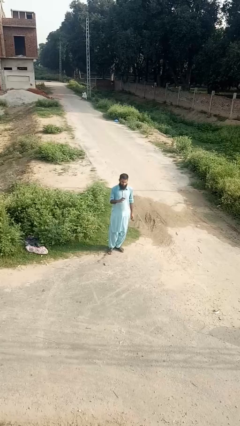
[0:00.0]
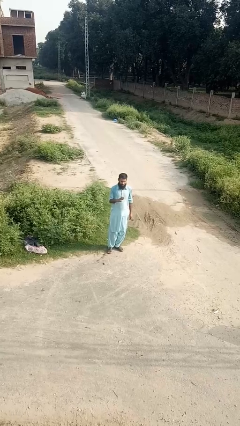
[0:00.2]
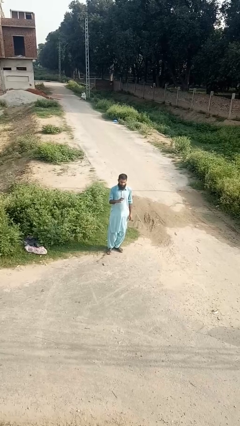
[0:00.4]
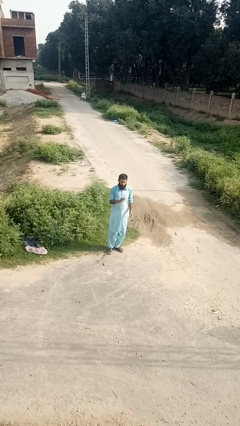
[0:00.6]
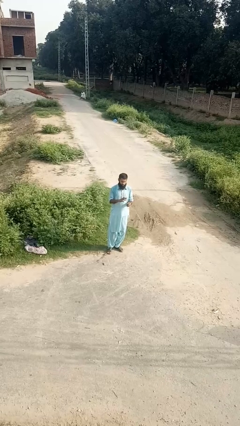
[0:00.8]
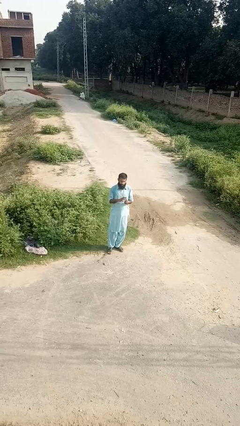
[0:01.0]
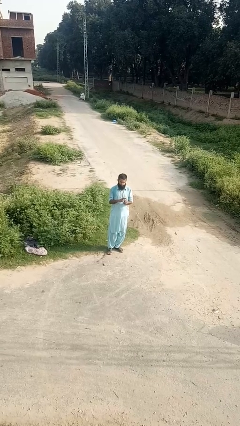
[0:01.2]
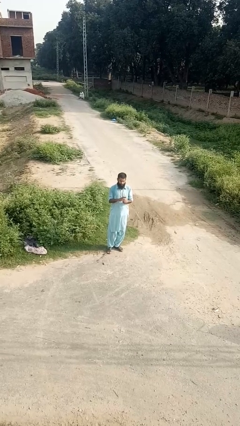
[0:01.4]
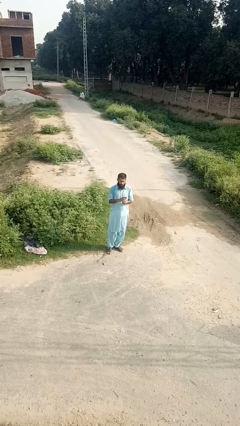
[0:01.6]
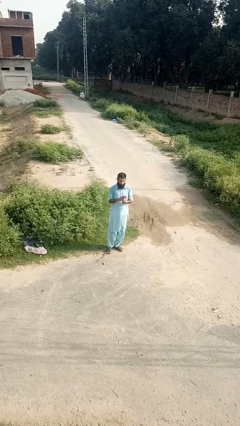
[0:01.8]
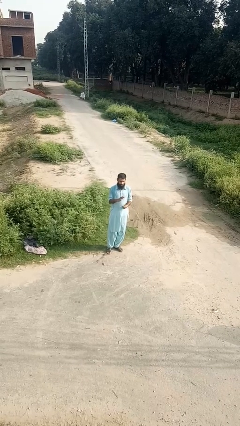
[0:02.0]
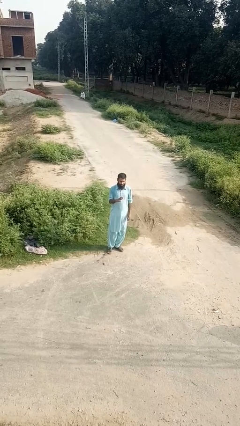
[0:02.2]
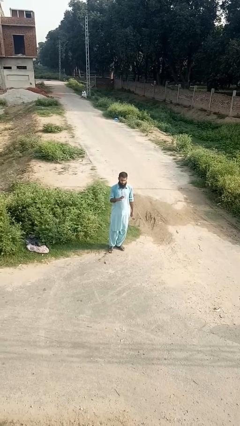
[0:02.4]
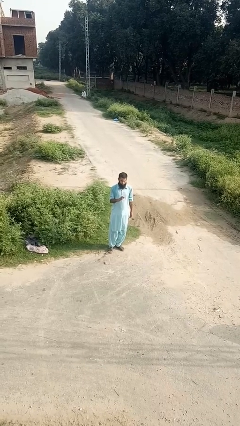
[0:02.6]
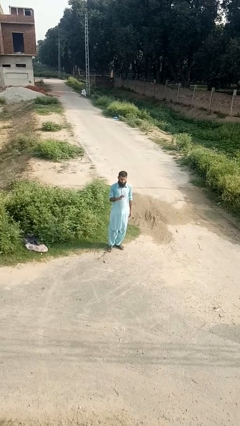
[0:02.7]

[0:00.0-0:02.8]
person puts on ring

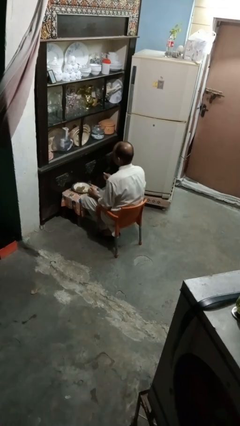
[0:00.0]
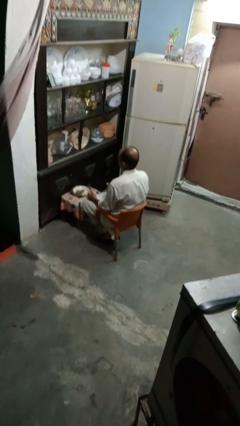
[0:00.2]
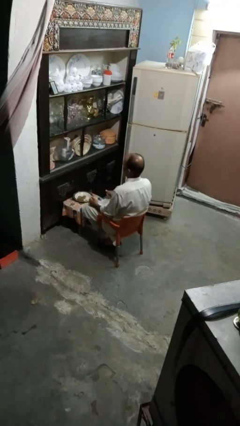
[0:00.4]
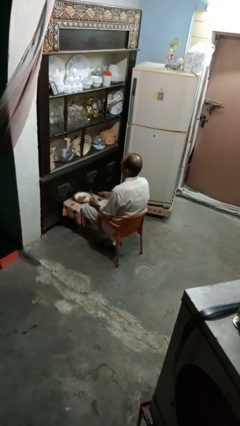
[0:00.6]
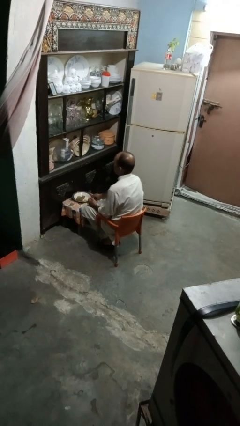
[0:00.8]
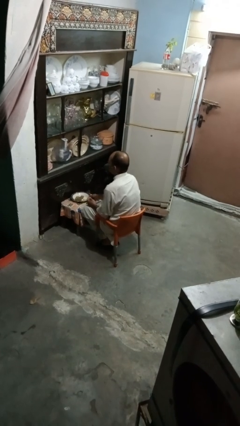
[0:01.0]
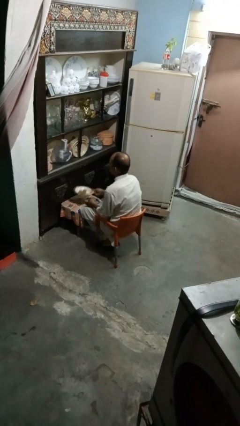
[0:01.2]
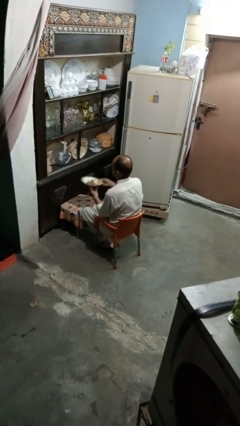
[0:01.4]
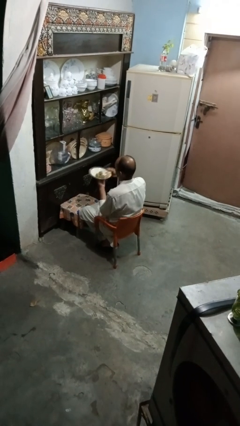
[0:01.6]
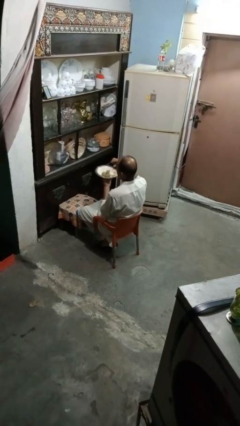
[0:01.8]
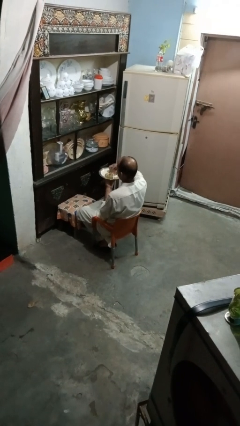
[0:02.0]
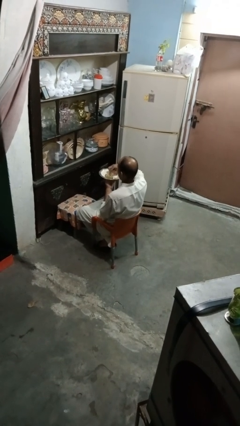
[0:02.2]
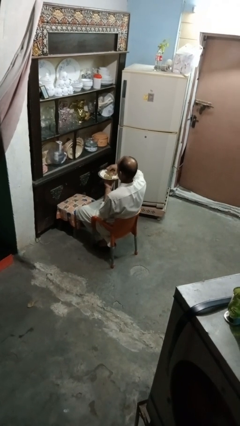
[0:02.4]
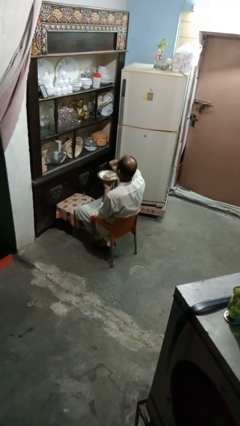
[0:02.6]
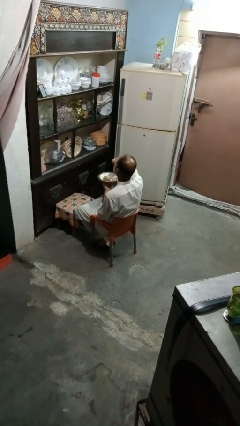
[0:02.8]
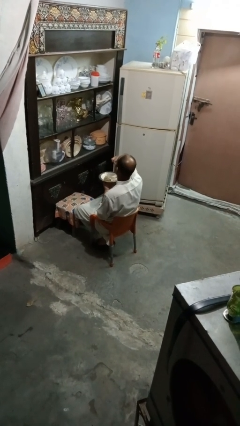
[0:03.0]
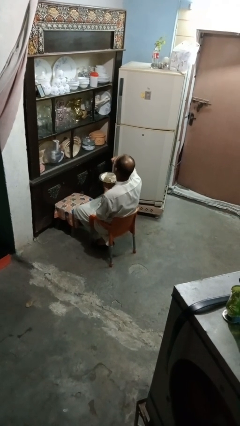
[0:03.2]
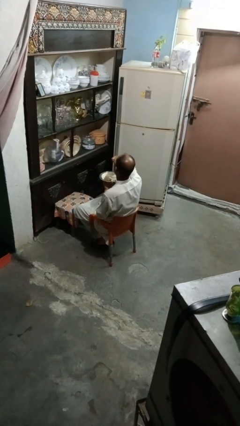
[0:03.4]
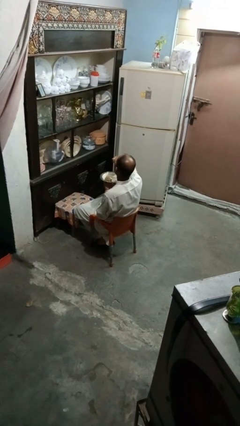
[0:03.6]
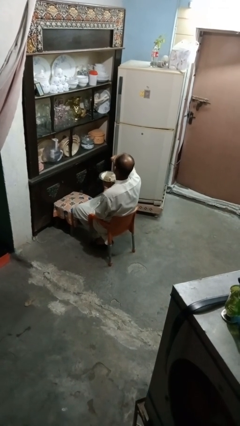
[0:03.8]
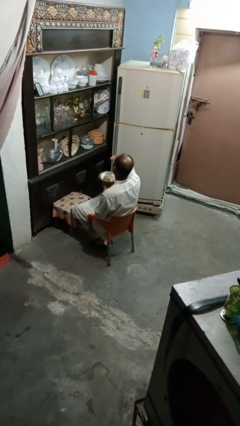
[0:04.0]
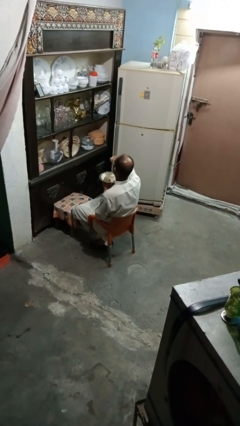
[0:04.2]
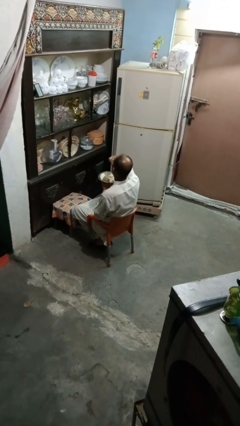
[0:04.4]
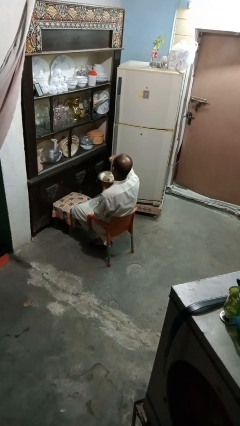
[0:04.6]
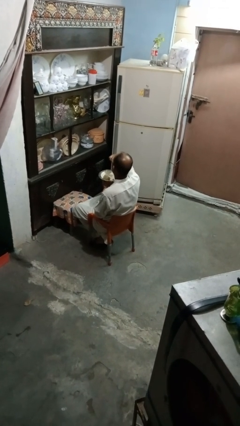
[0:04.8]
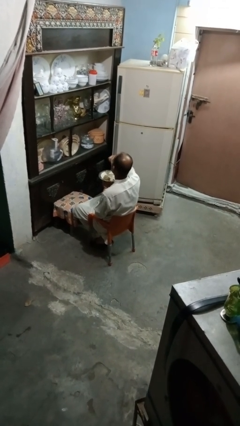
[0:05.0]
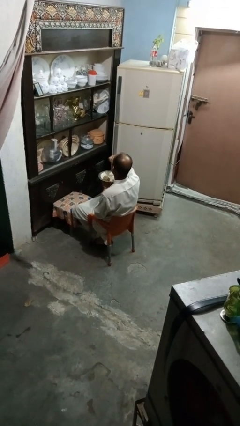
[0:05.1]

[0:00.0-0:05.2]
person eats with hands

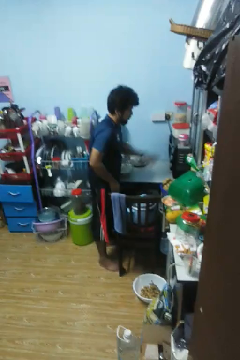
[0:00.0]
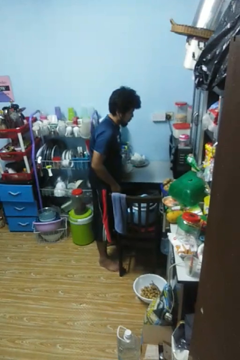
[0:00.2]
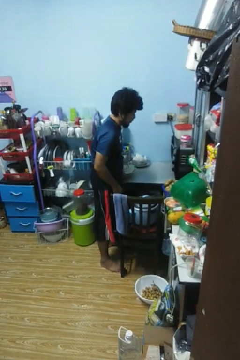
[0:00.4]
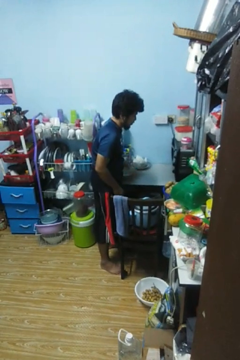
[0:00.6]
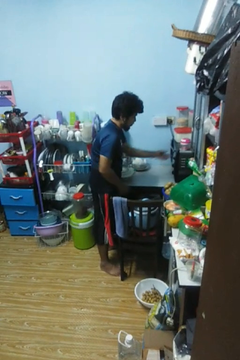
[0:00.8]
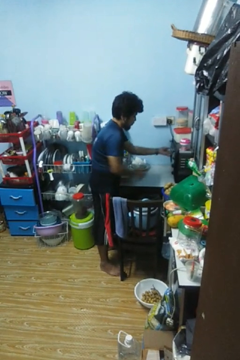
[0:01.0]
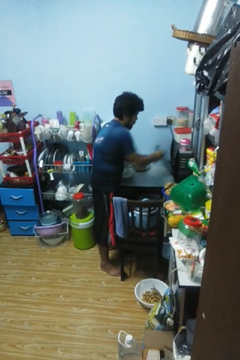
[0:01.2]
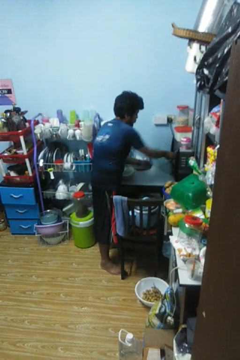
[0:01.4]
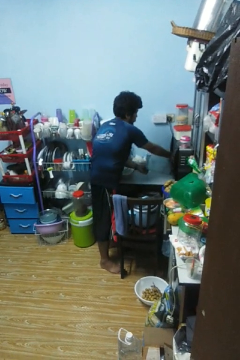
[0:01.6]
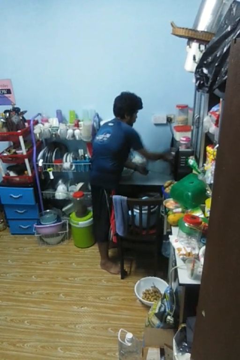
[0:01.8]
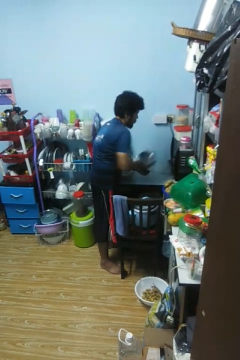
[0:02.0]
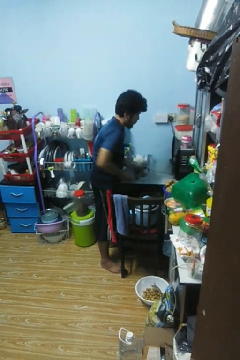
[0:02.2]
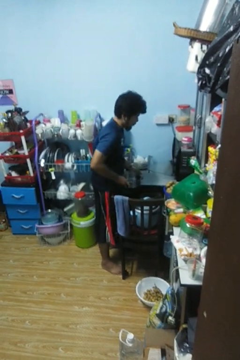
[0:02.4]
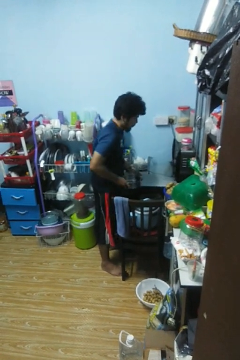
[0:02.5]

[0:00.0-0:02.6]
person takes object from oven

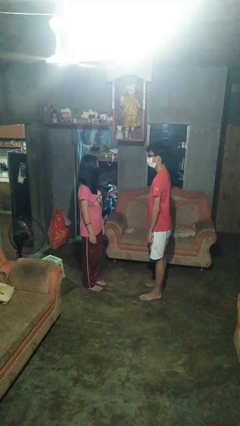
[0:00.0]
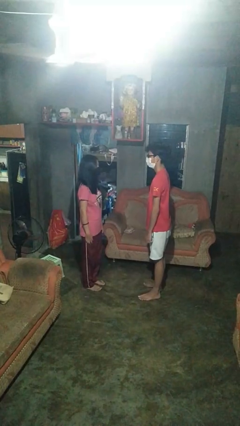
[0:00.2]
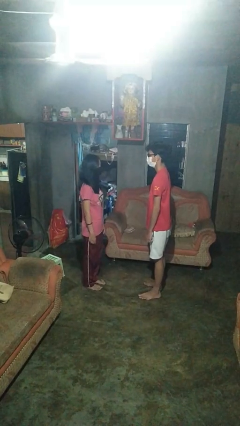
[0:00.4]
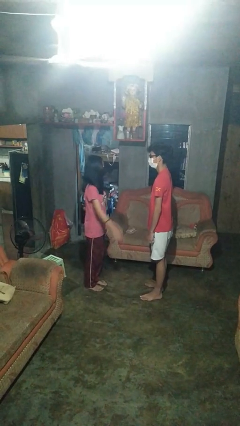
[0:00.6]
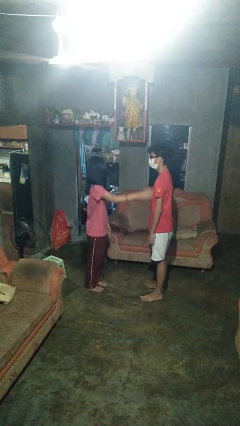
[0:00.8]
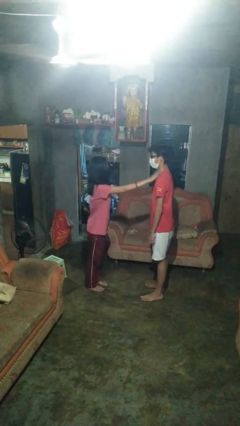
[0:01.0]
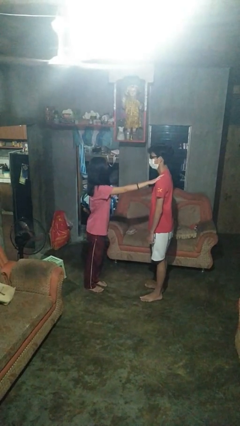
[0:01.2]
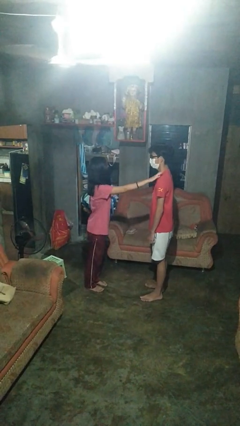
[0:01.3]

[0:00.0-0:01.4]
person pounds shoulders of person

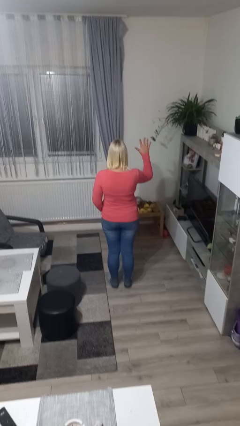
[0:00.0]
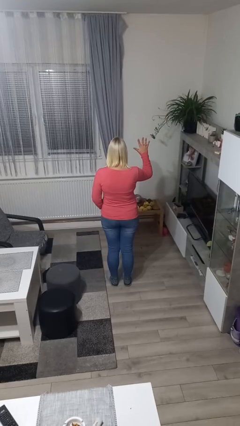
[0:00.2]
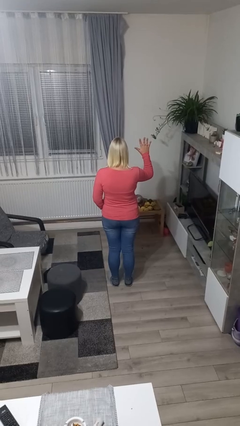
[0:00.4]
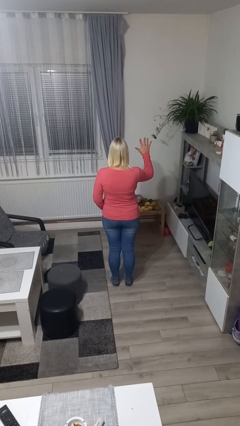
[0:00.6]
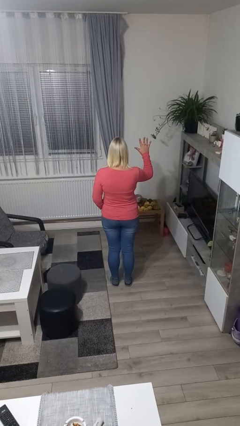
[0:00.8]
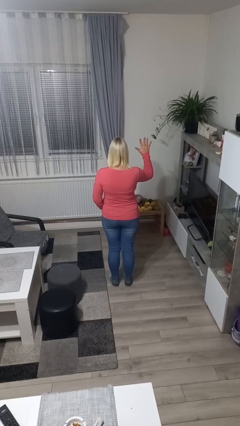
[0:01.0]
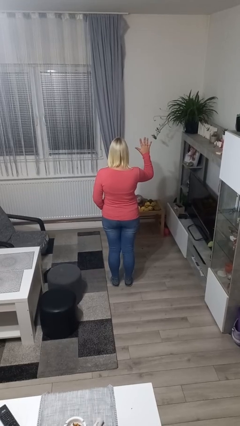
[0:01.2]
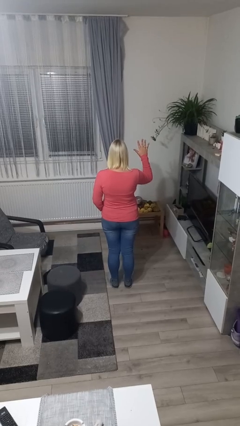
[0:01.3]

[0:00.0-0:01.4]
person gestures number five

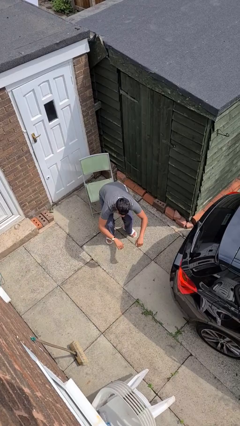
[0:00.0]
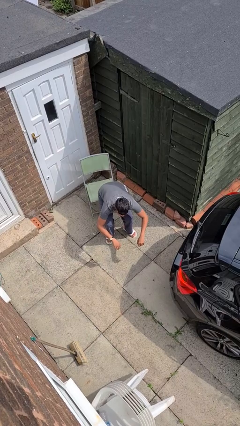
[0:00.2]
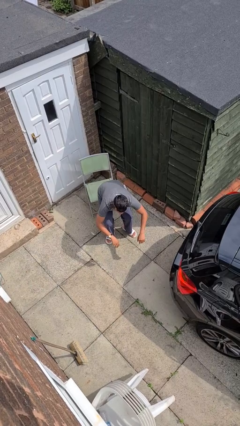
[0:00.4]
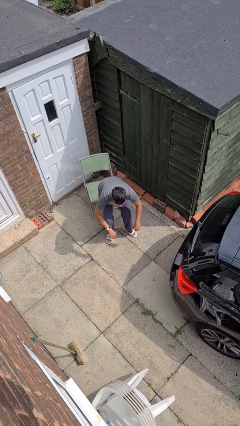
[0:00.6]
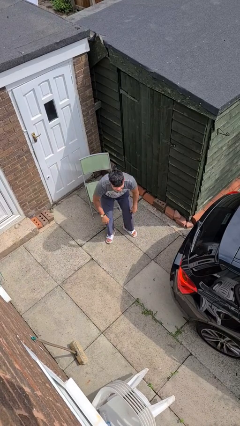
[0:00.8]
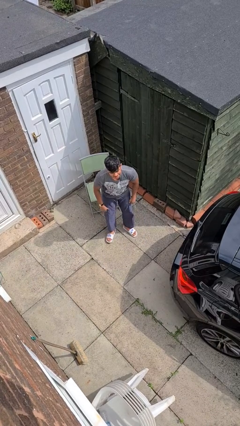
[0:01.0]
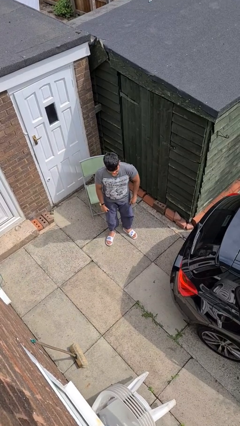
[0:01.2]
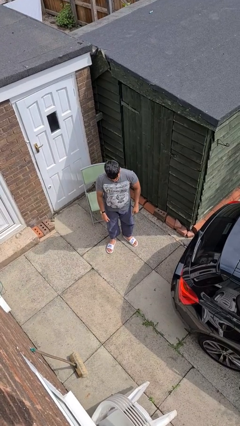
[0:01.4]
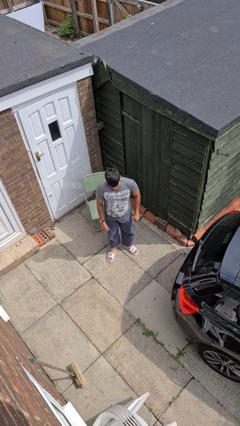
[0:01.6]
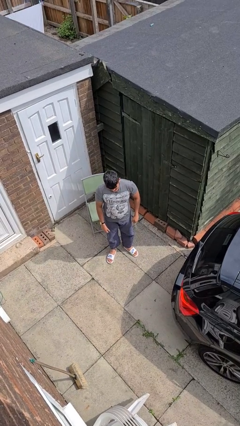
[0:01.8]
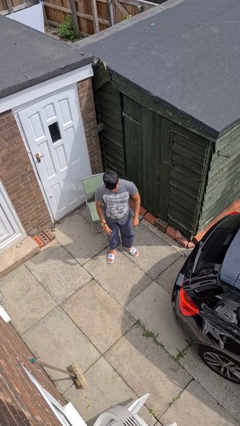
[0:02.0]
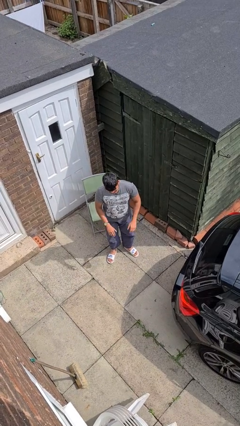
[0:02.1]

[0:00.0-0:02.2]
person stands up

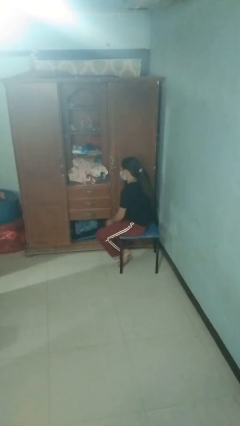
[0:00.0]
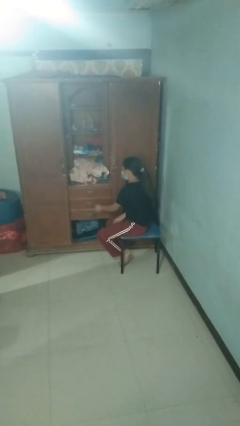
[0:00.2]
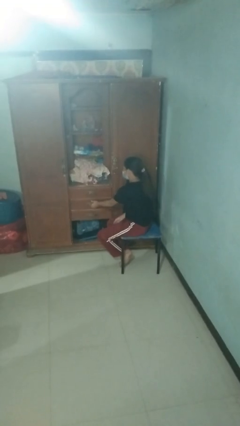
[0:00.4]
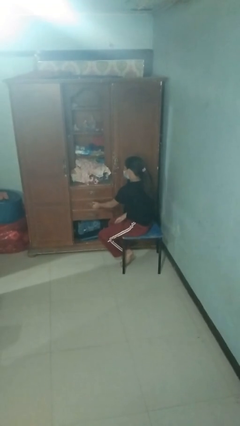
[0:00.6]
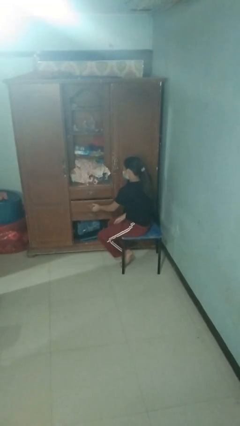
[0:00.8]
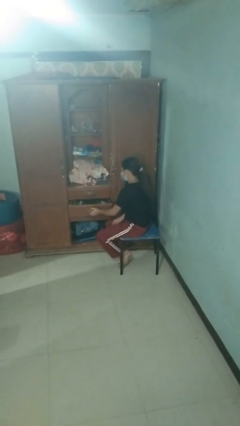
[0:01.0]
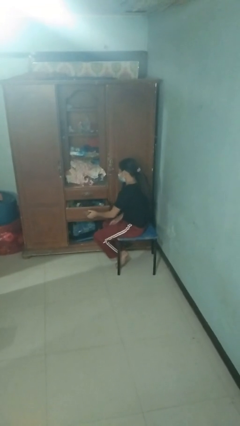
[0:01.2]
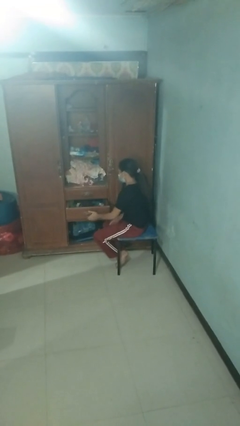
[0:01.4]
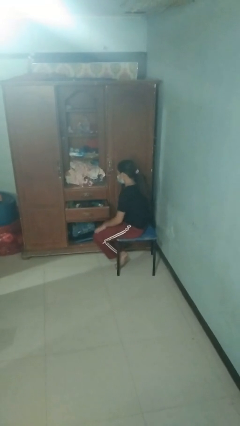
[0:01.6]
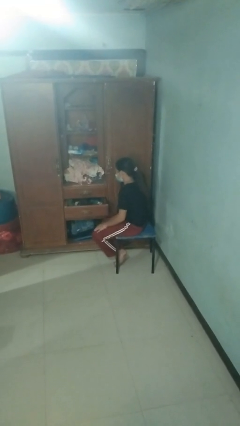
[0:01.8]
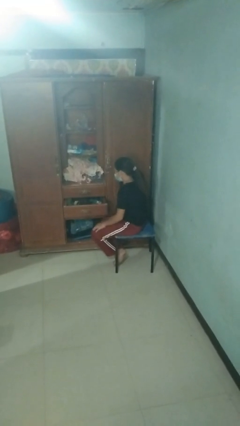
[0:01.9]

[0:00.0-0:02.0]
person opens dresser drawer
